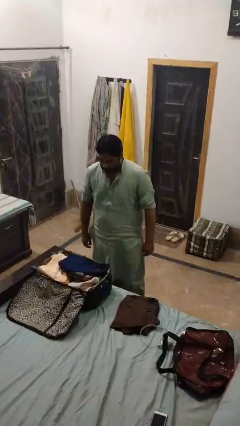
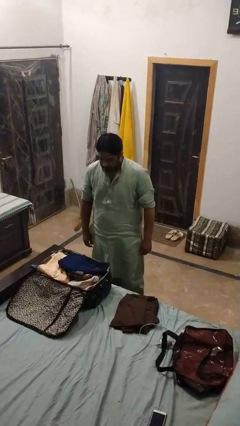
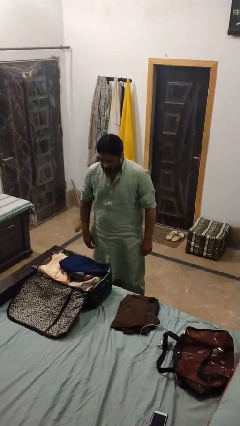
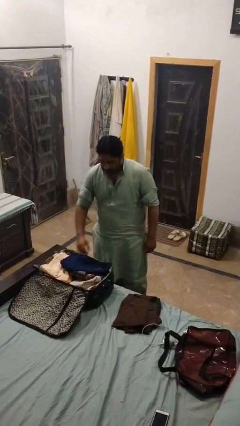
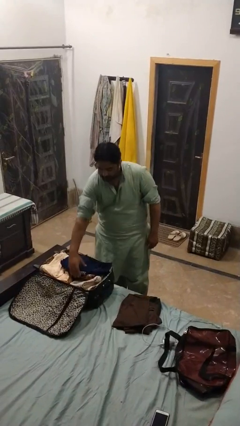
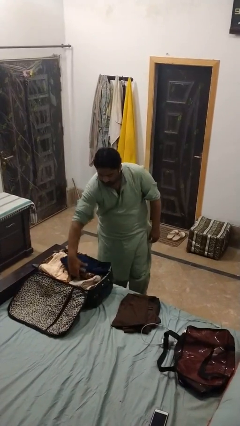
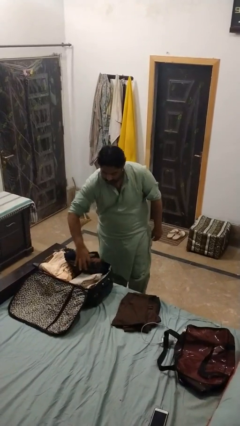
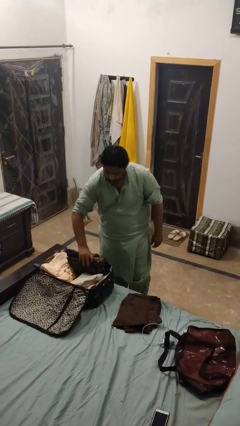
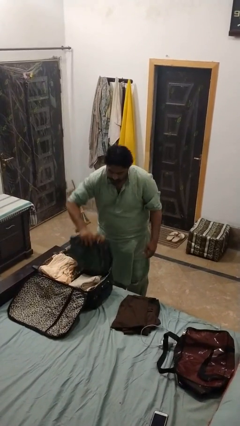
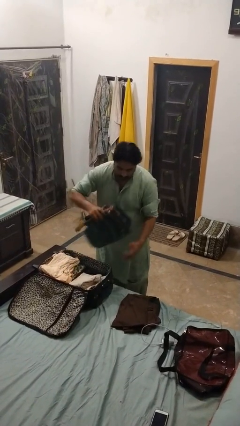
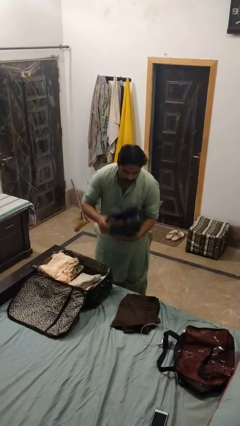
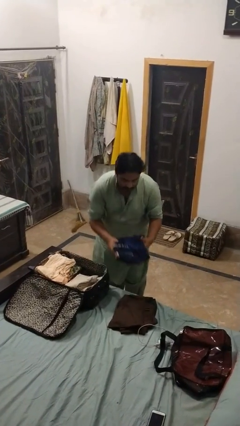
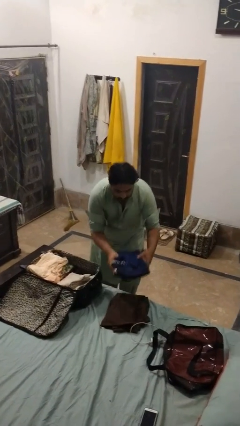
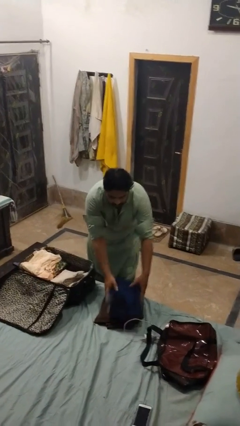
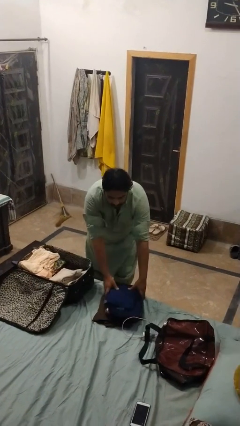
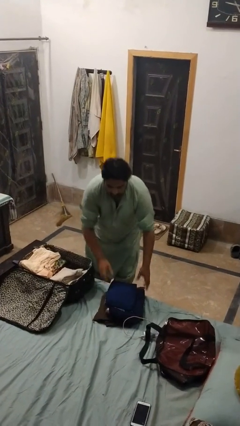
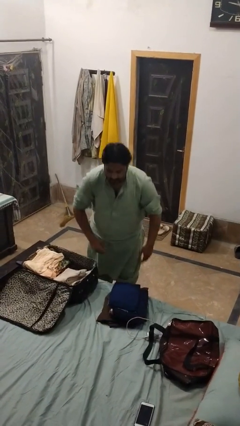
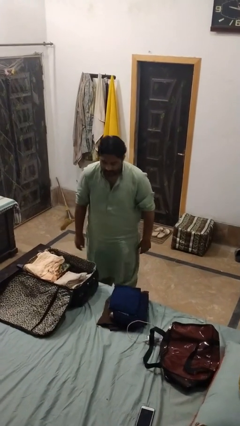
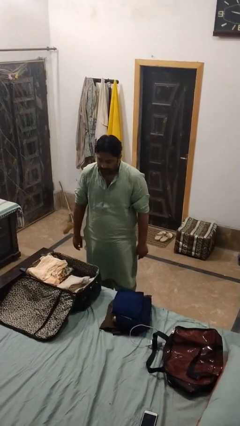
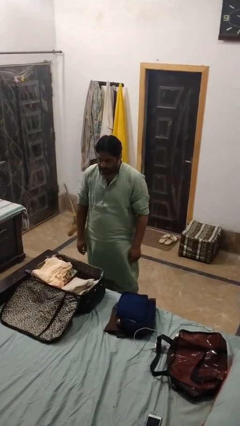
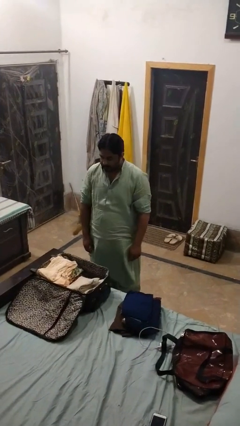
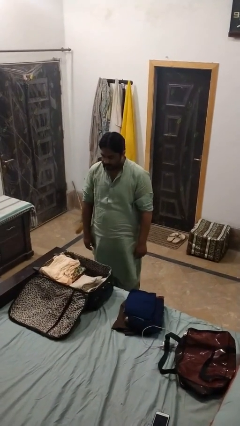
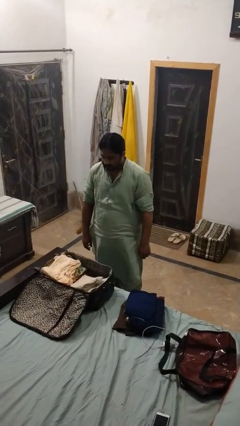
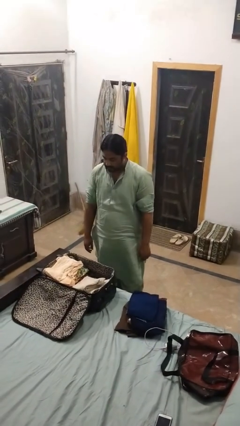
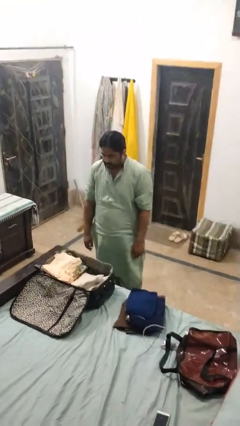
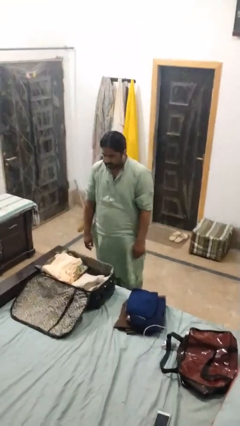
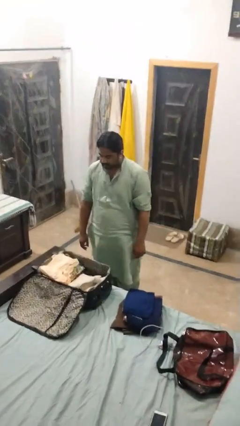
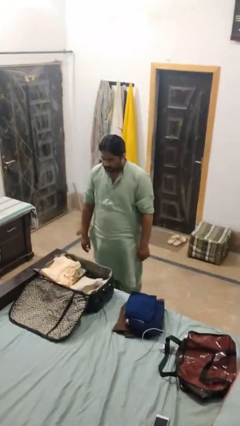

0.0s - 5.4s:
person unloads clothes from suitcase

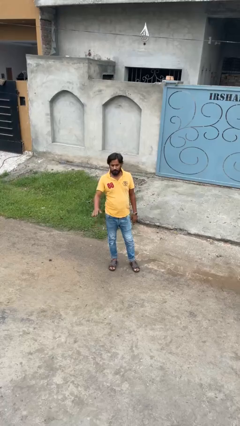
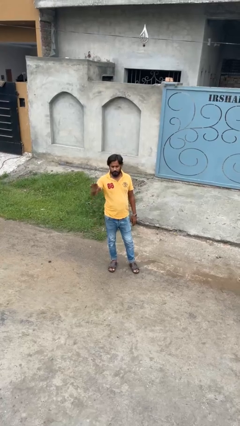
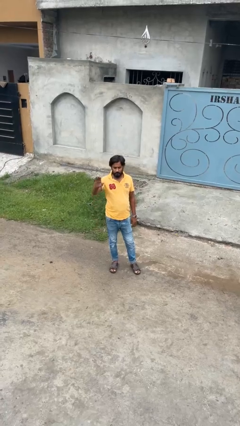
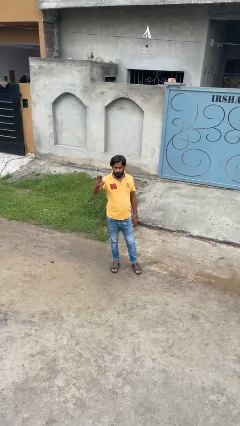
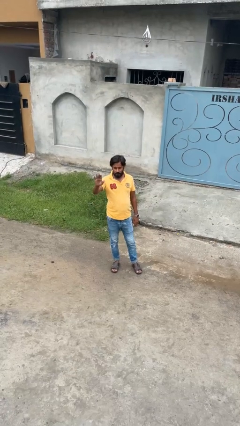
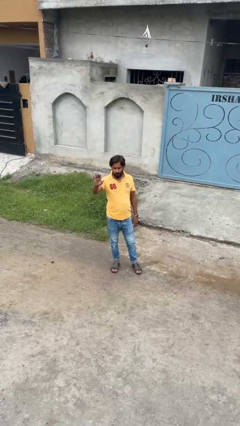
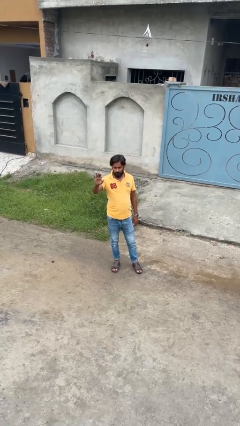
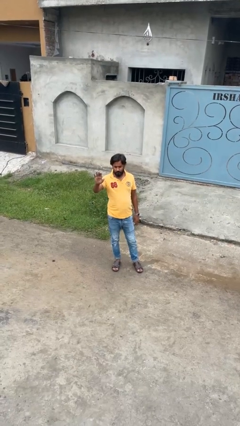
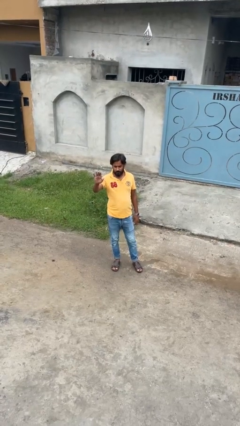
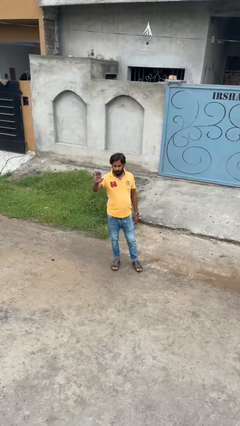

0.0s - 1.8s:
person gestures raise hand

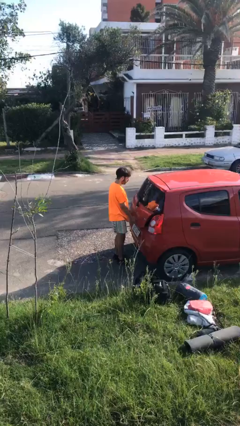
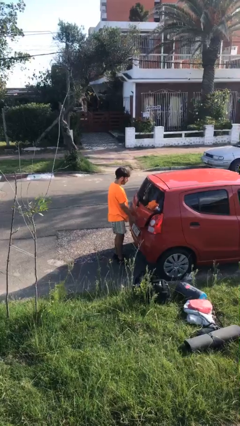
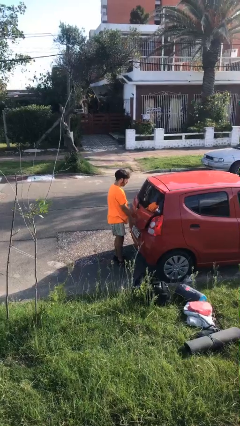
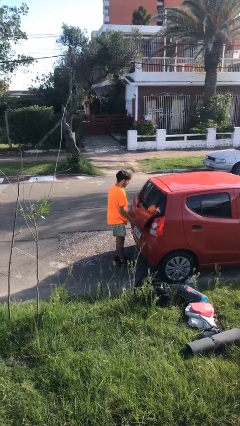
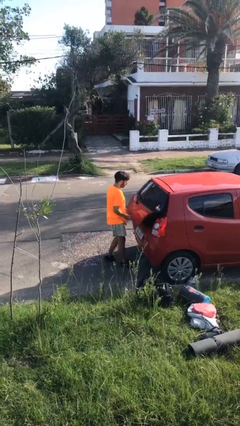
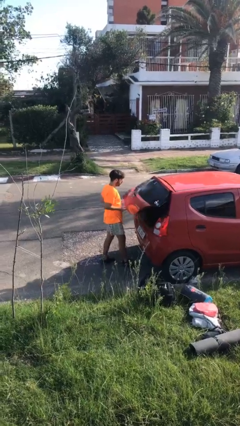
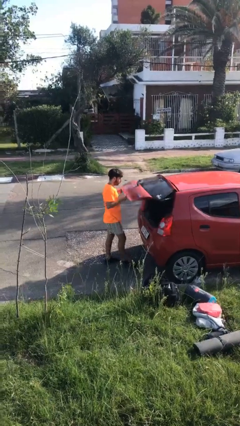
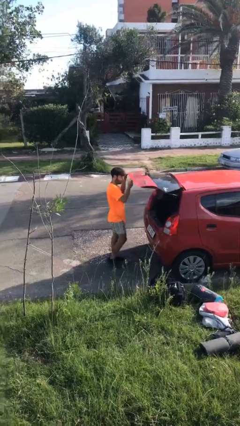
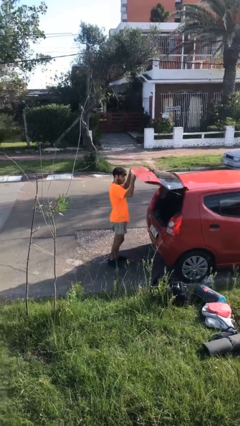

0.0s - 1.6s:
person opens car trunk

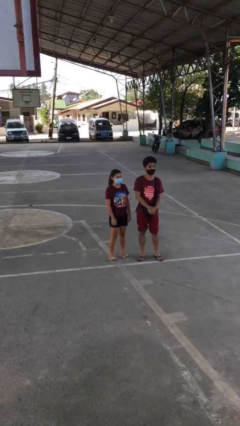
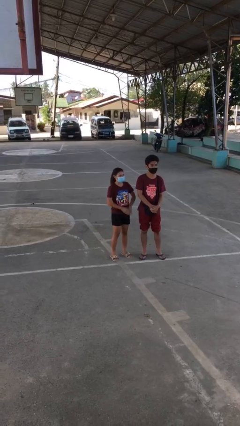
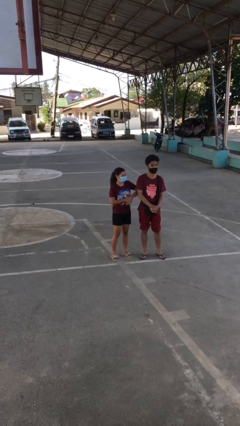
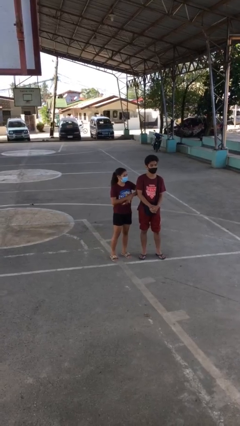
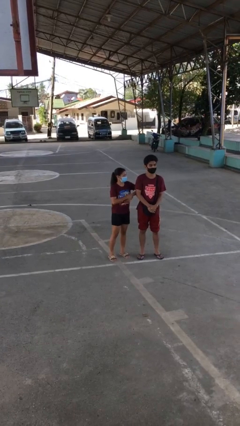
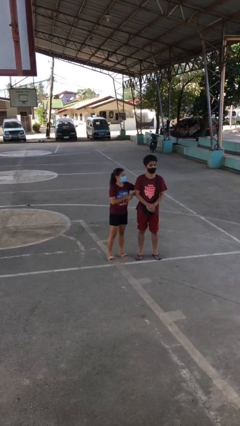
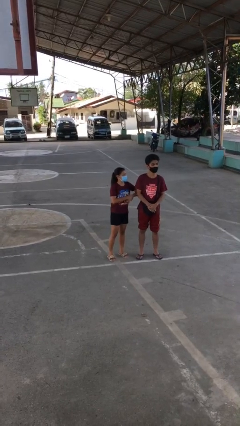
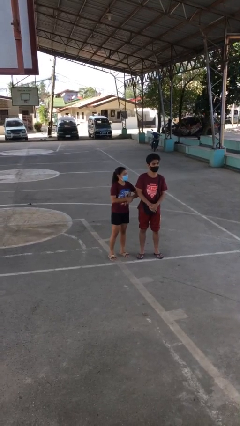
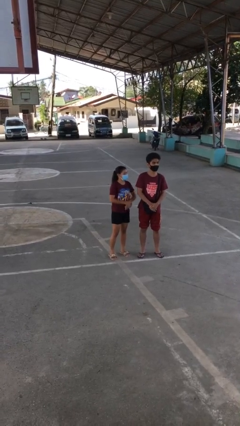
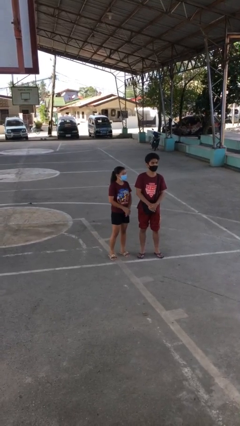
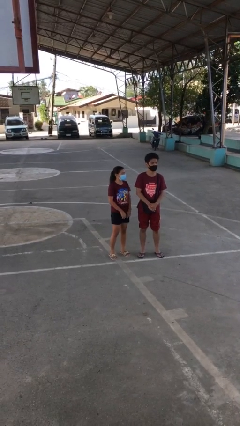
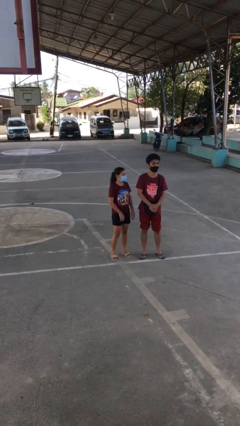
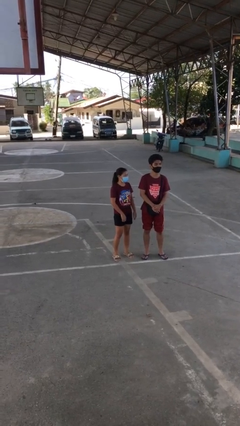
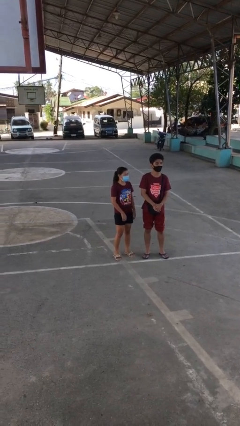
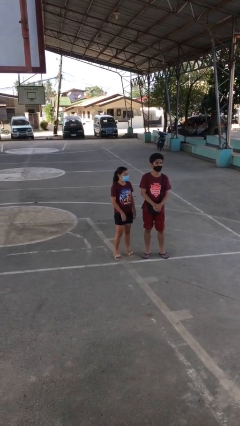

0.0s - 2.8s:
person nudges person with elbow

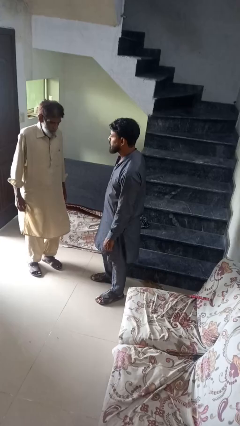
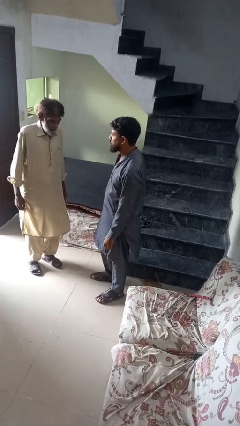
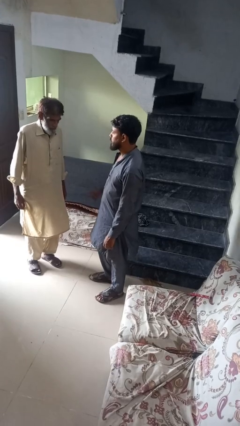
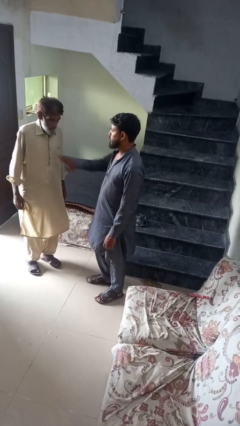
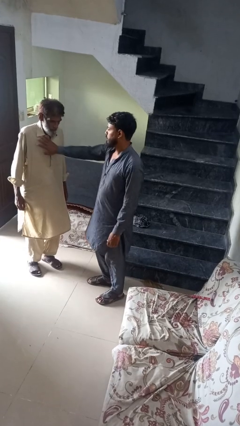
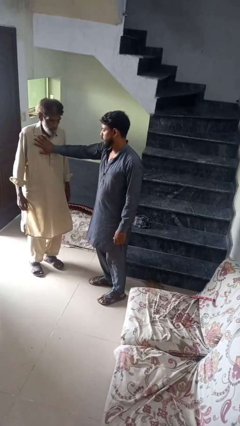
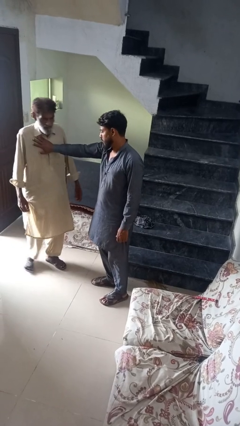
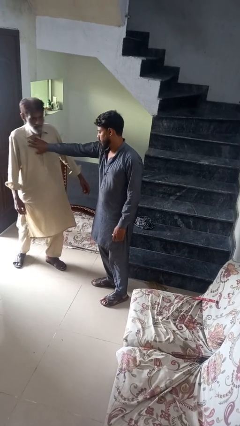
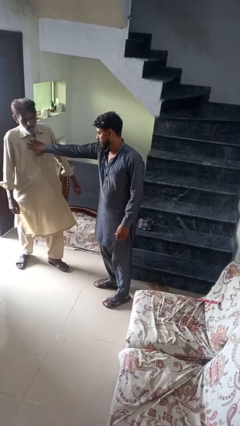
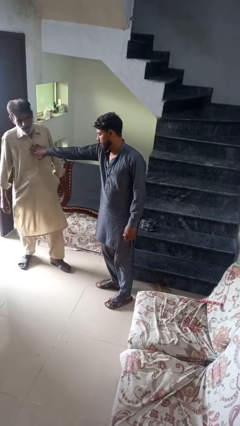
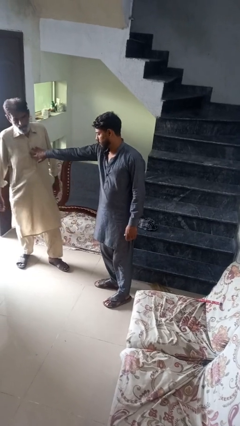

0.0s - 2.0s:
person shoves person

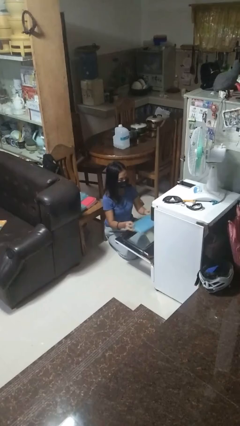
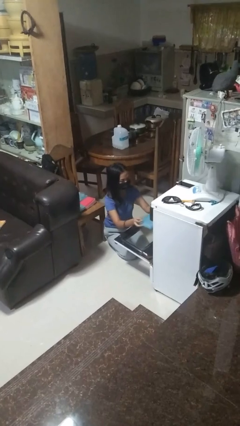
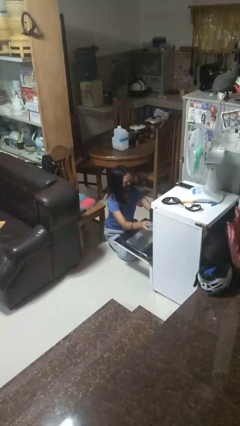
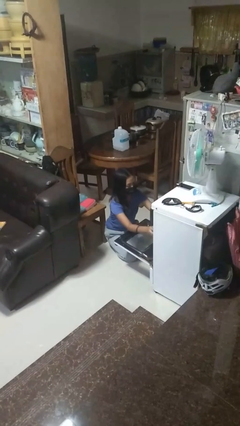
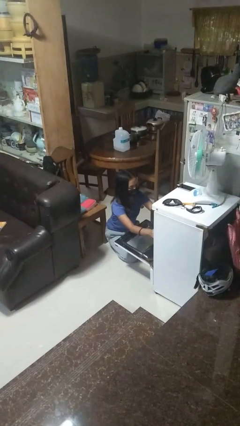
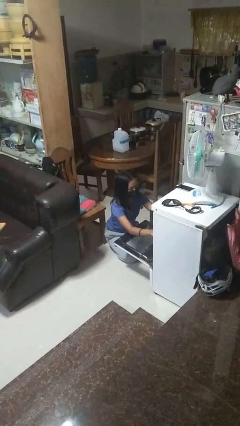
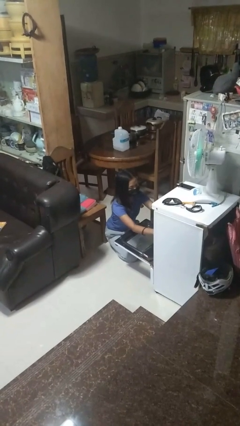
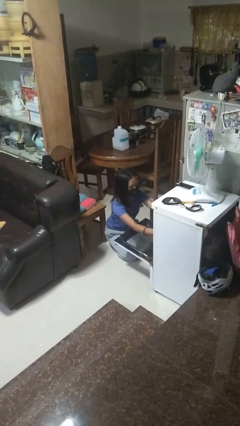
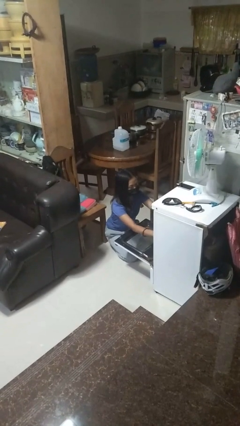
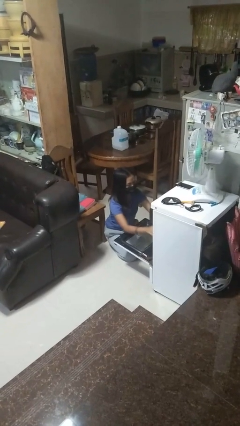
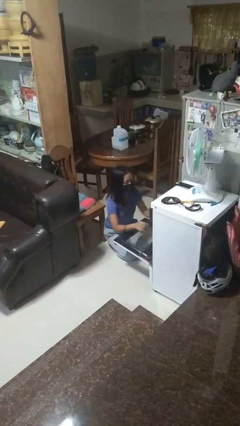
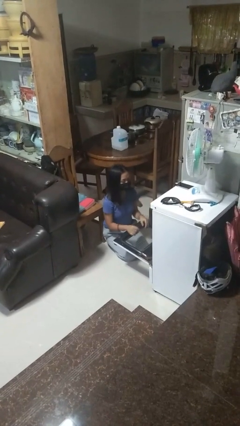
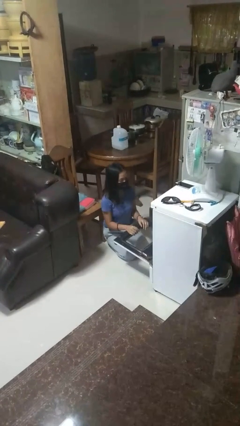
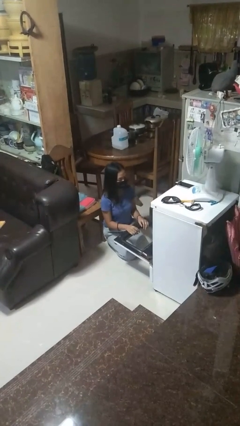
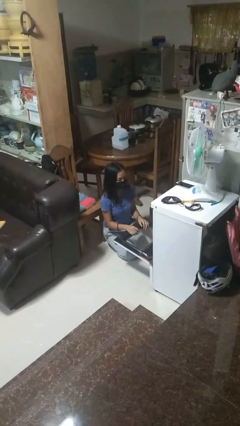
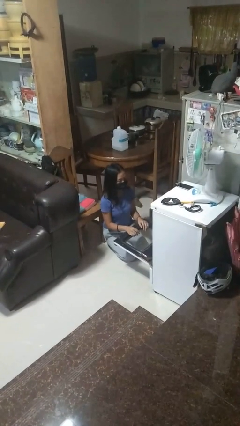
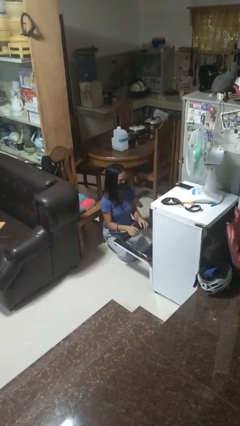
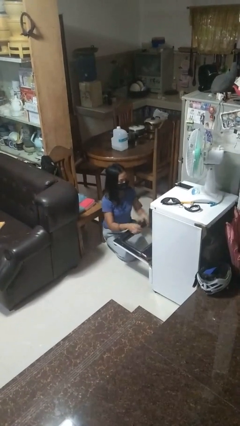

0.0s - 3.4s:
person puts object into oven

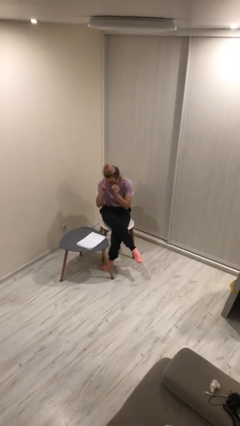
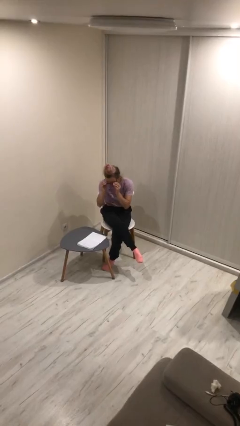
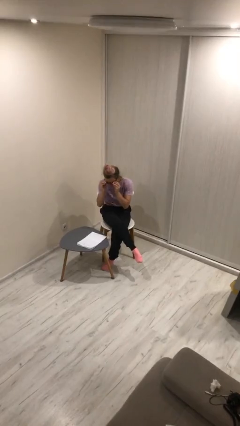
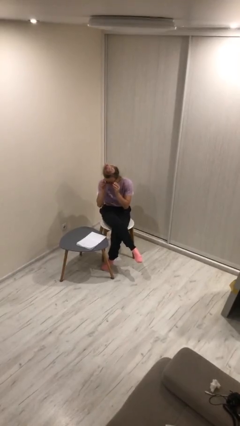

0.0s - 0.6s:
person puts on glasses
